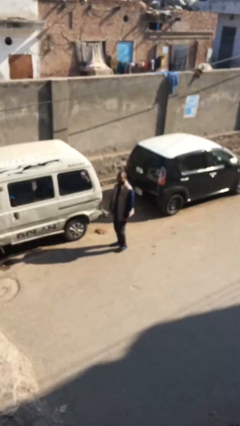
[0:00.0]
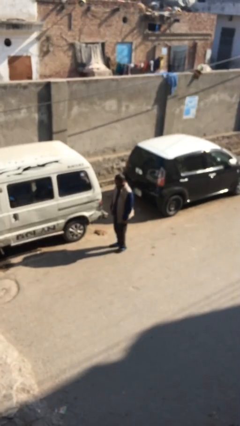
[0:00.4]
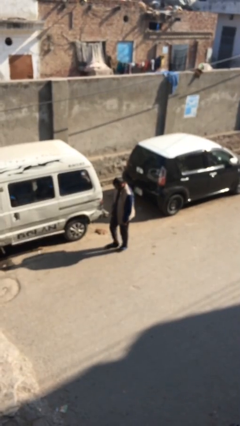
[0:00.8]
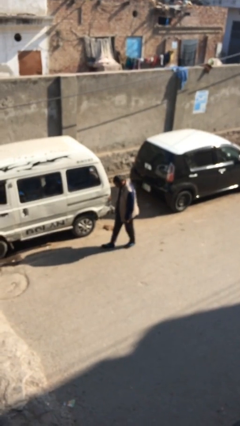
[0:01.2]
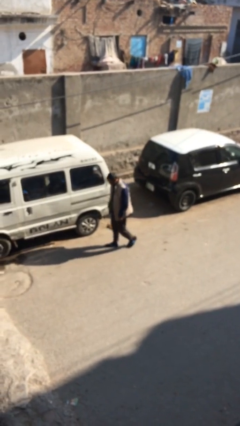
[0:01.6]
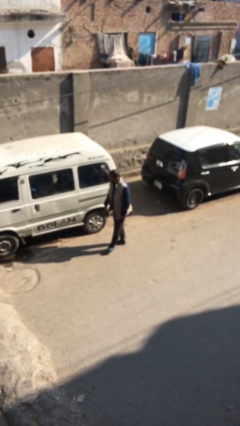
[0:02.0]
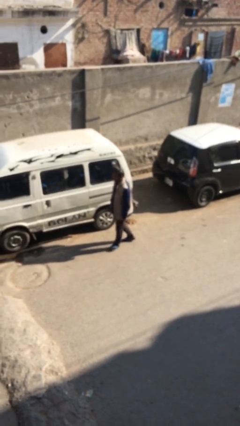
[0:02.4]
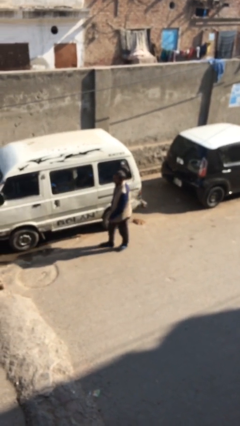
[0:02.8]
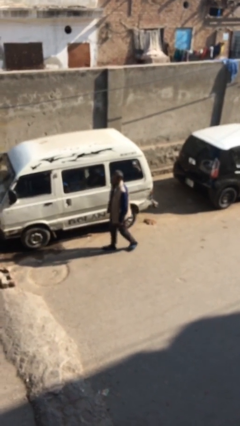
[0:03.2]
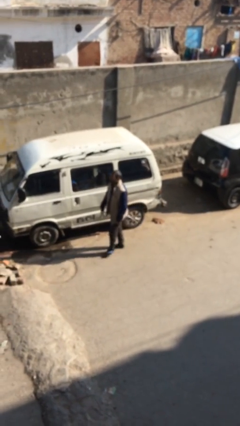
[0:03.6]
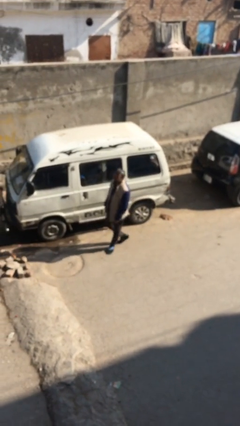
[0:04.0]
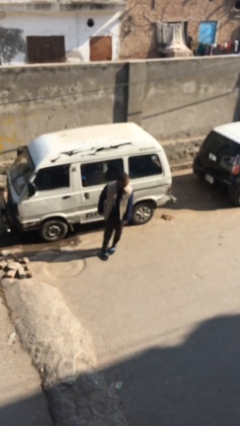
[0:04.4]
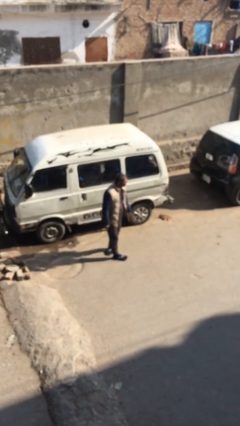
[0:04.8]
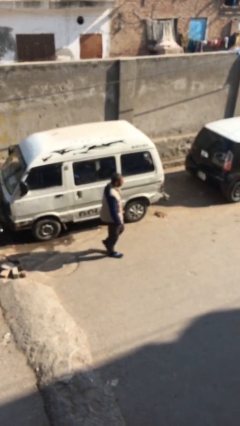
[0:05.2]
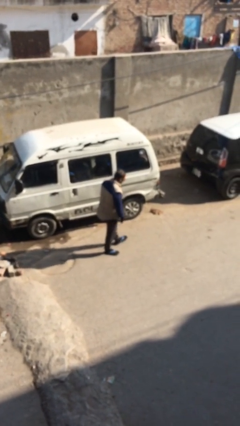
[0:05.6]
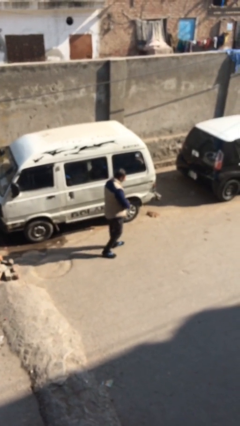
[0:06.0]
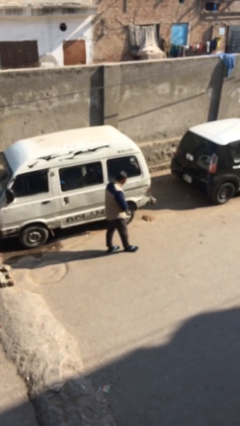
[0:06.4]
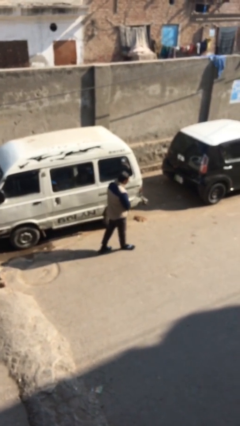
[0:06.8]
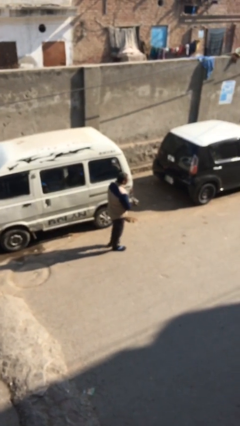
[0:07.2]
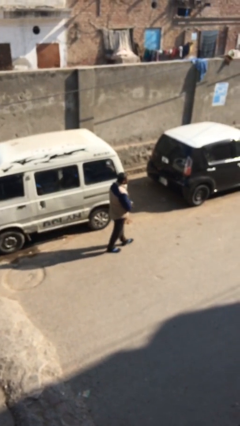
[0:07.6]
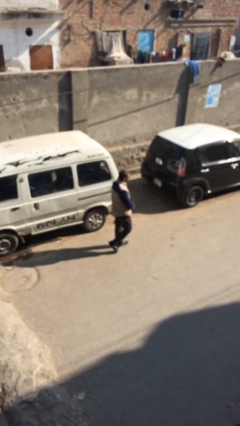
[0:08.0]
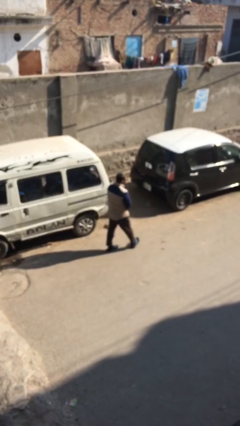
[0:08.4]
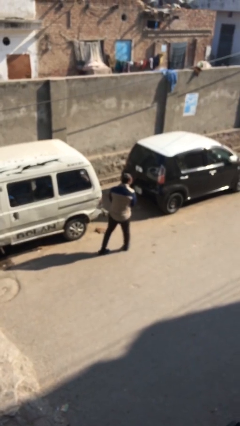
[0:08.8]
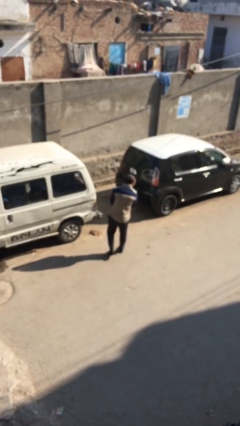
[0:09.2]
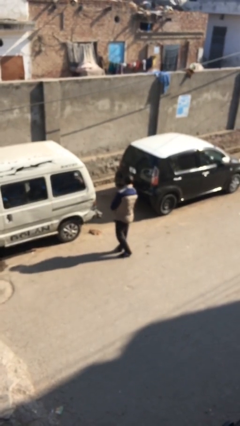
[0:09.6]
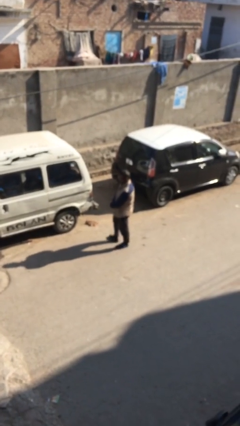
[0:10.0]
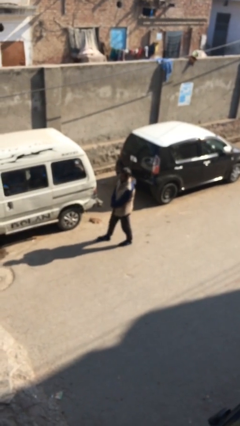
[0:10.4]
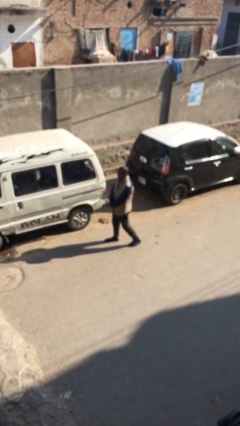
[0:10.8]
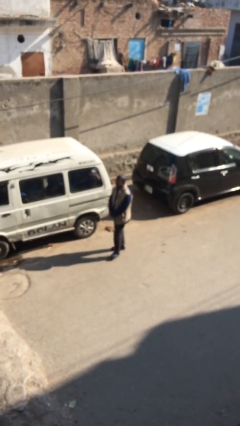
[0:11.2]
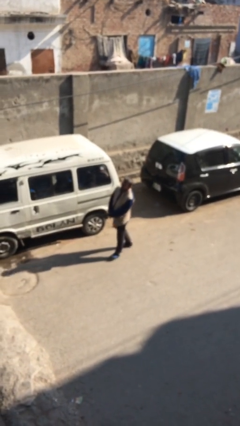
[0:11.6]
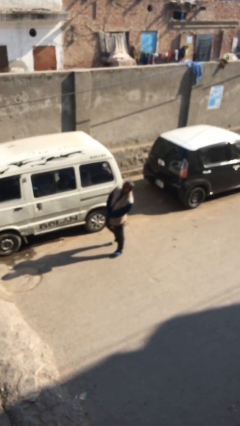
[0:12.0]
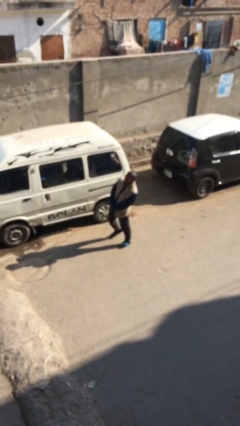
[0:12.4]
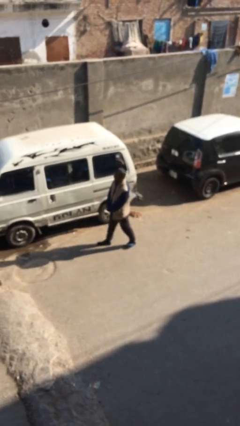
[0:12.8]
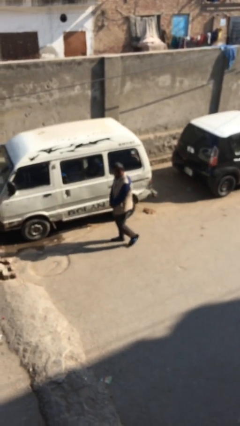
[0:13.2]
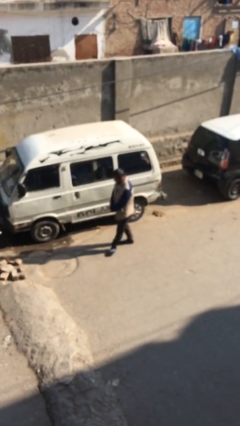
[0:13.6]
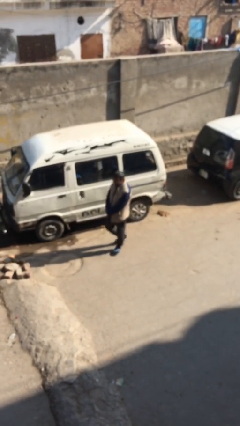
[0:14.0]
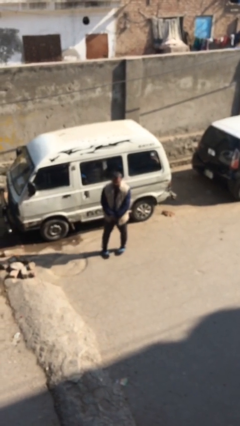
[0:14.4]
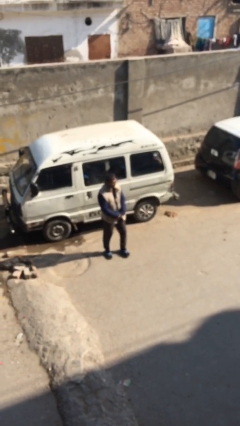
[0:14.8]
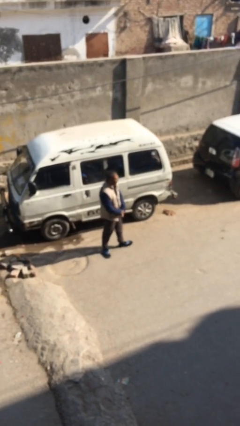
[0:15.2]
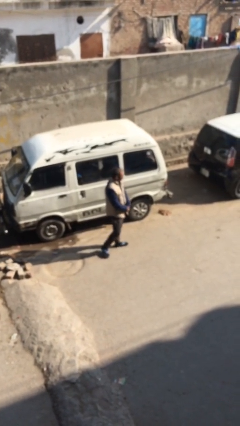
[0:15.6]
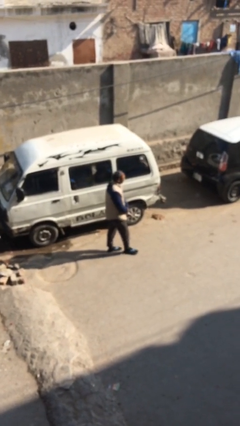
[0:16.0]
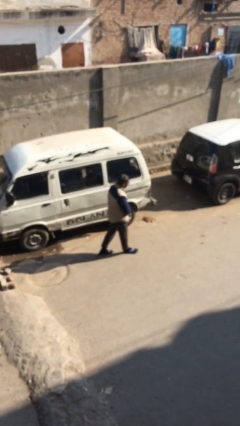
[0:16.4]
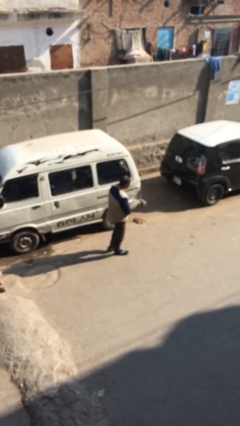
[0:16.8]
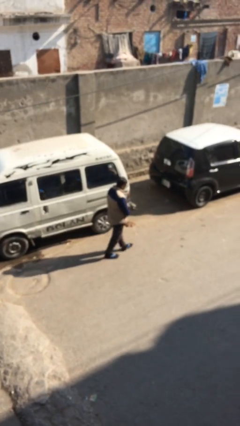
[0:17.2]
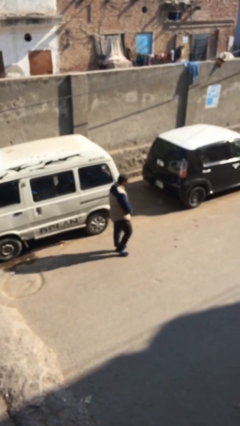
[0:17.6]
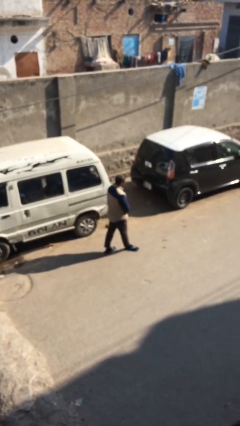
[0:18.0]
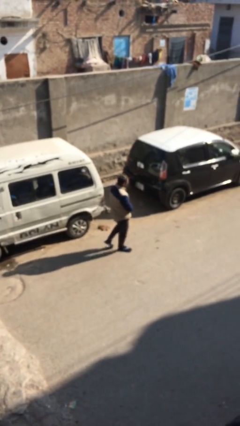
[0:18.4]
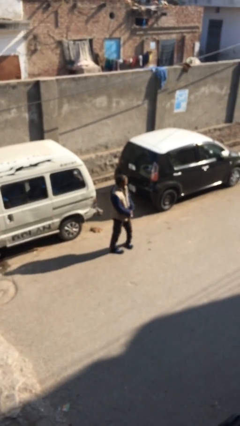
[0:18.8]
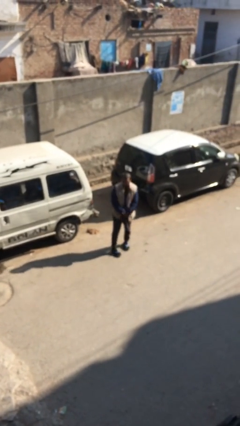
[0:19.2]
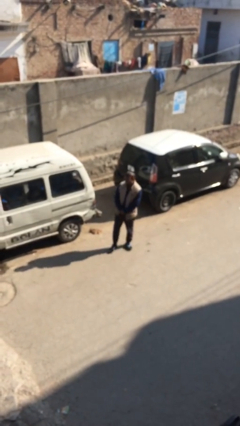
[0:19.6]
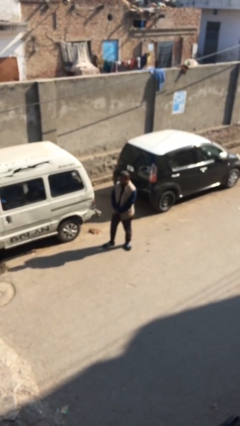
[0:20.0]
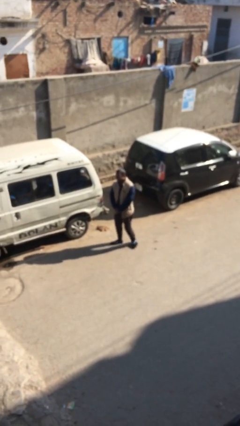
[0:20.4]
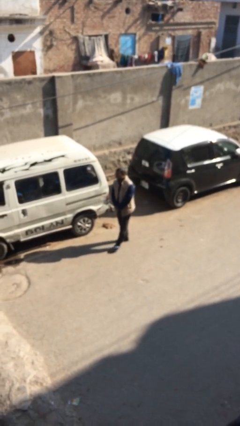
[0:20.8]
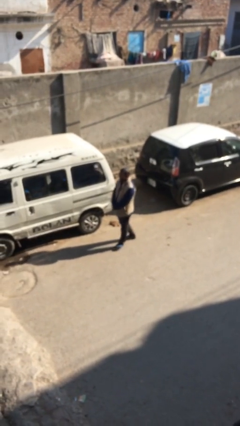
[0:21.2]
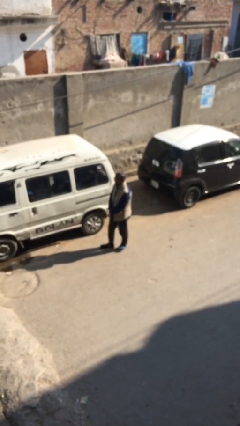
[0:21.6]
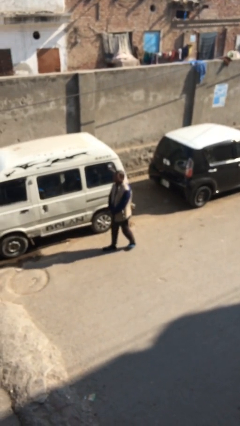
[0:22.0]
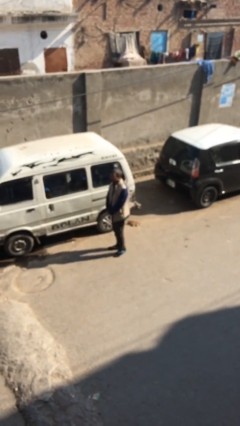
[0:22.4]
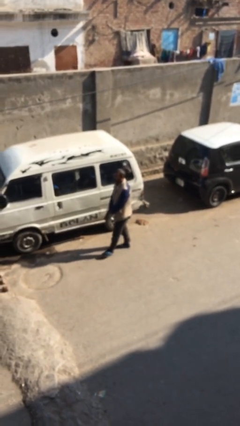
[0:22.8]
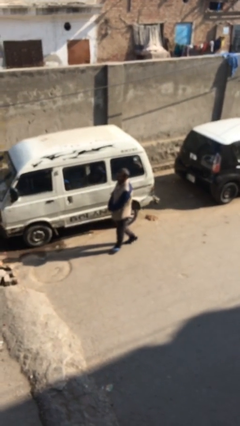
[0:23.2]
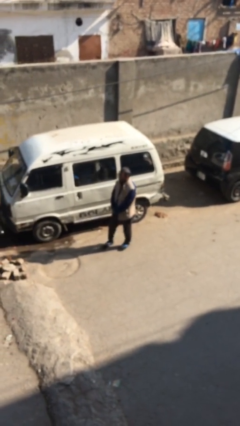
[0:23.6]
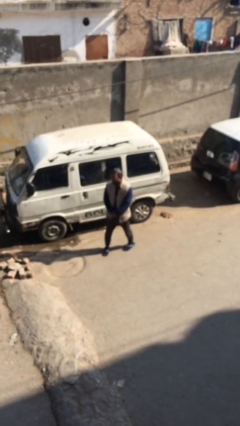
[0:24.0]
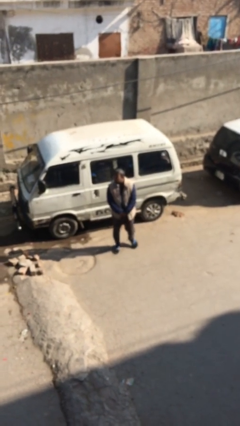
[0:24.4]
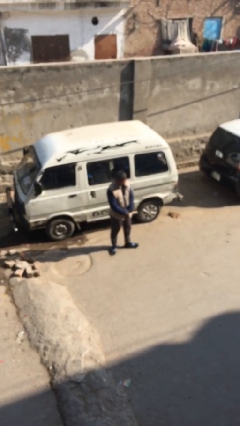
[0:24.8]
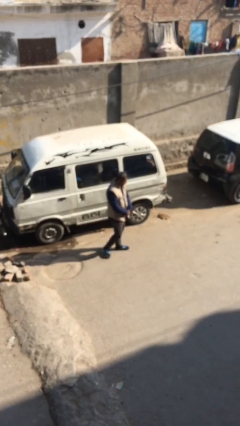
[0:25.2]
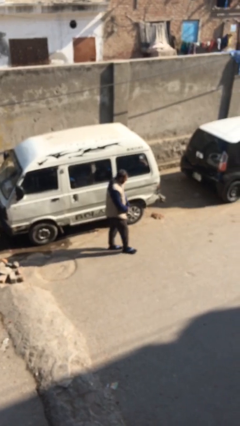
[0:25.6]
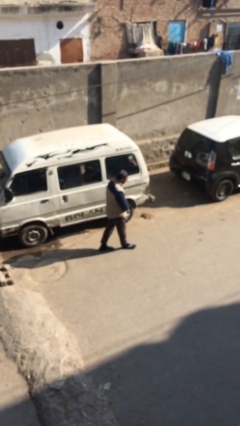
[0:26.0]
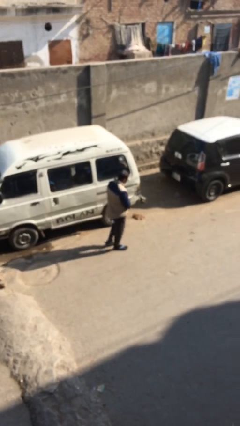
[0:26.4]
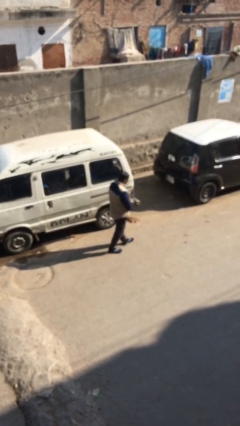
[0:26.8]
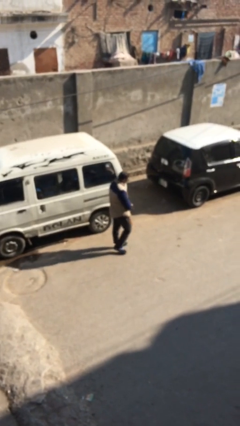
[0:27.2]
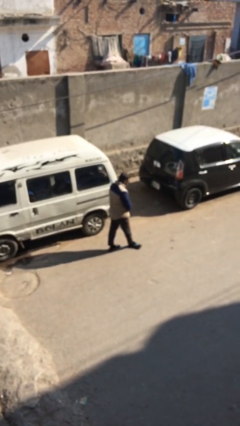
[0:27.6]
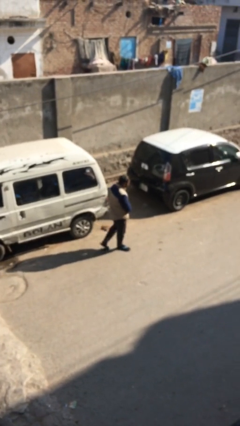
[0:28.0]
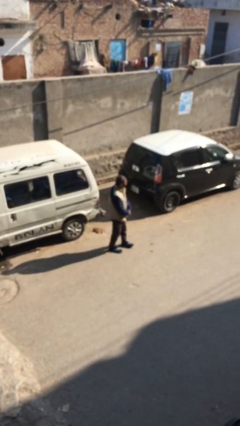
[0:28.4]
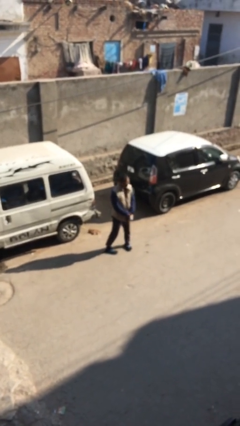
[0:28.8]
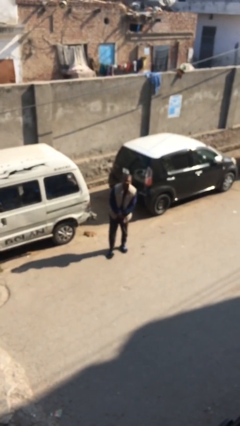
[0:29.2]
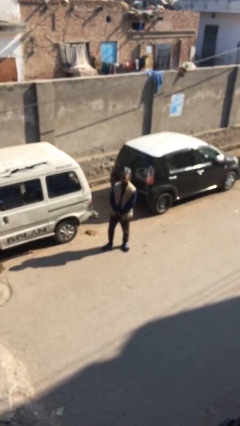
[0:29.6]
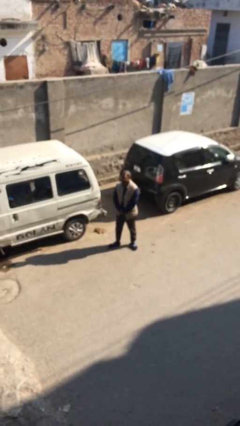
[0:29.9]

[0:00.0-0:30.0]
person walks

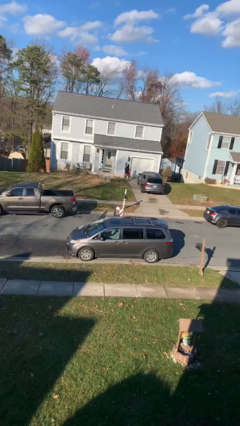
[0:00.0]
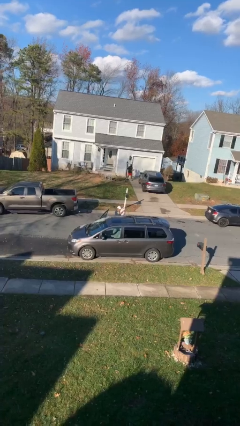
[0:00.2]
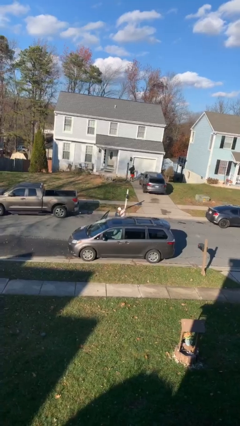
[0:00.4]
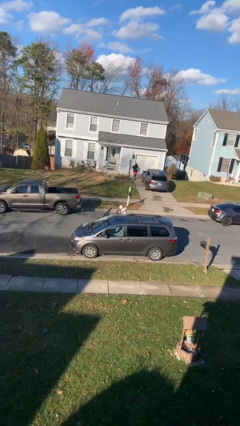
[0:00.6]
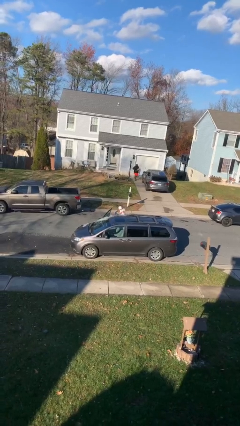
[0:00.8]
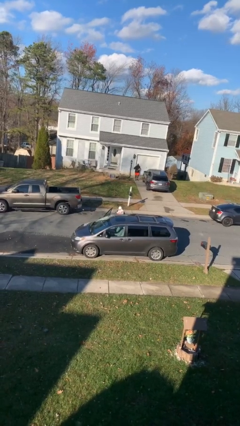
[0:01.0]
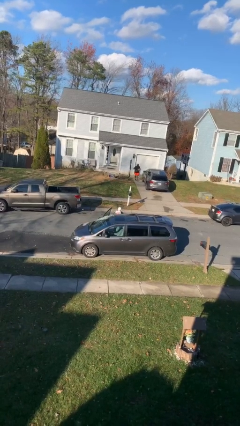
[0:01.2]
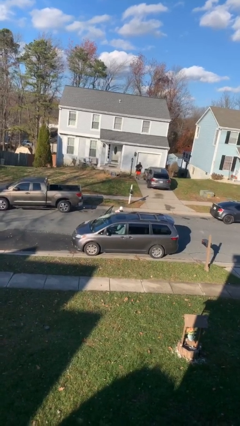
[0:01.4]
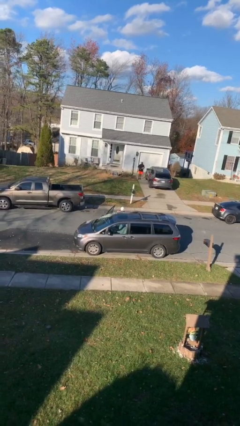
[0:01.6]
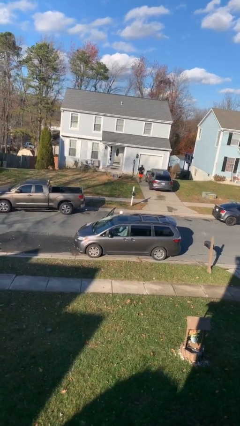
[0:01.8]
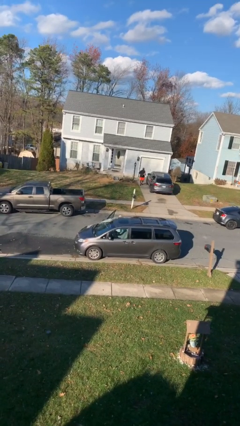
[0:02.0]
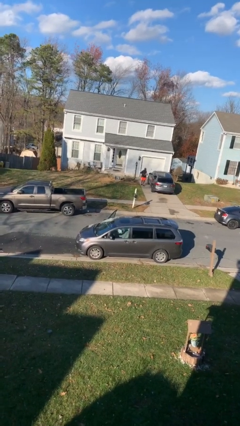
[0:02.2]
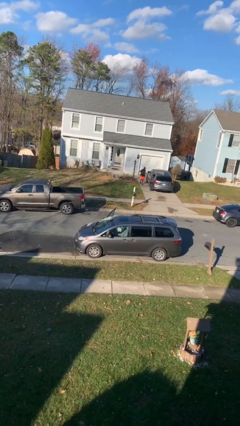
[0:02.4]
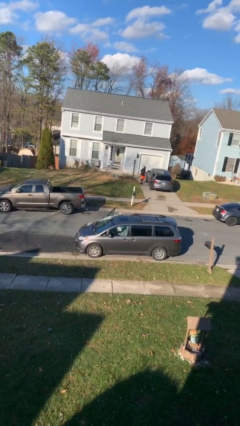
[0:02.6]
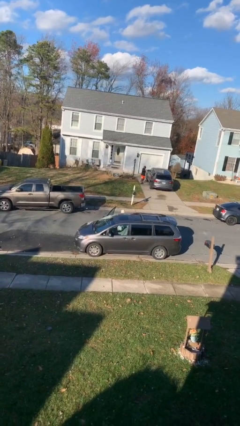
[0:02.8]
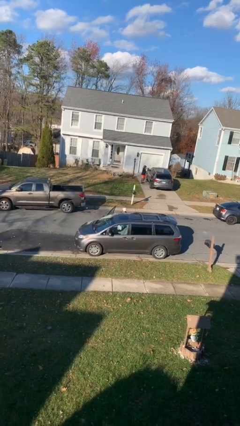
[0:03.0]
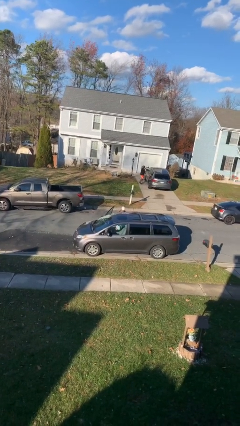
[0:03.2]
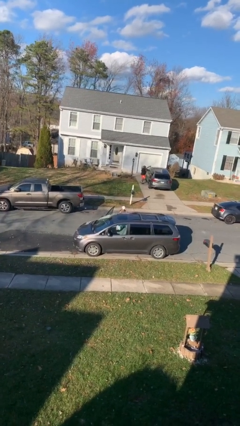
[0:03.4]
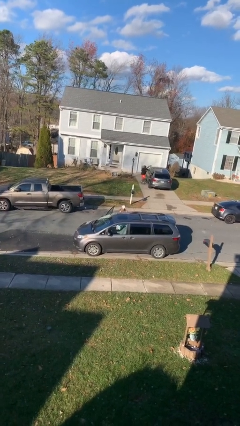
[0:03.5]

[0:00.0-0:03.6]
person loads car
